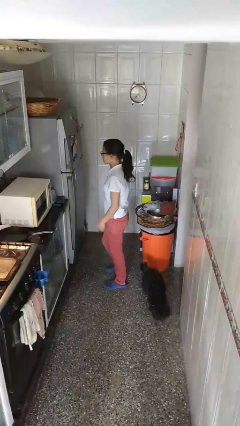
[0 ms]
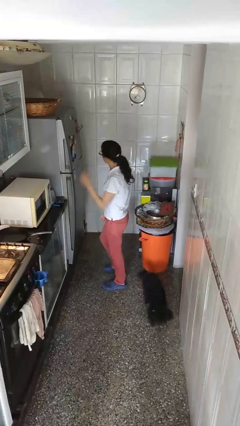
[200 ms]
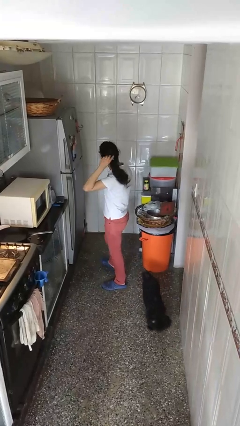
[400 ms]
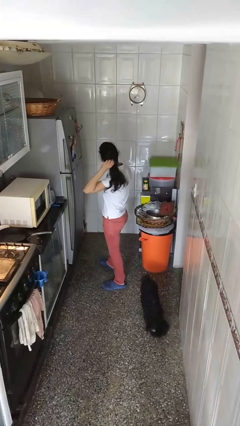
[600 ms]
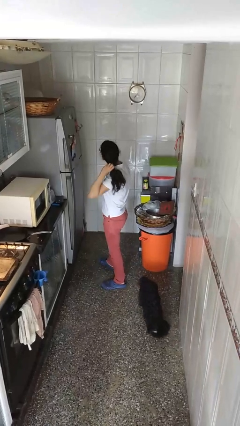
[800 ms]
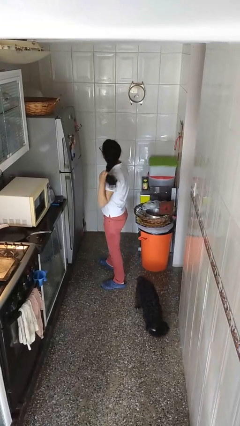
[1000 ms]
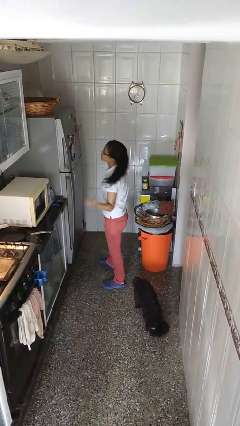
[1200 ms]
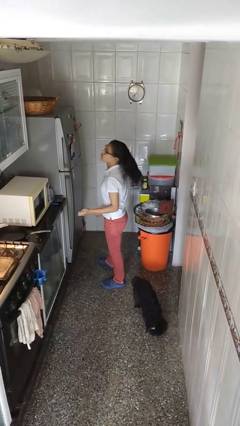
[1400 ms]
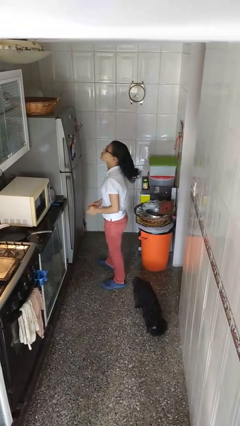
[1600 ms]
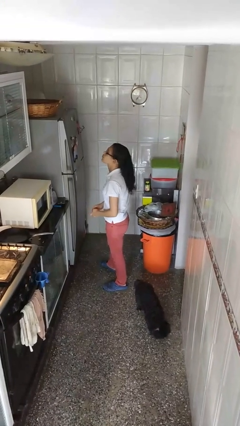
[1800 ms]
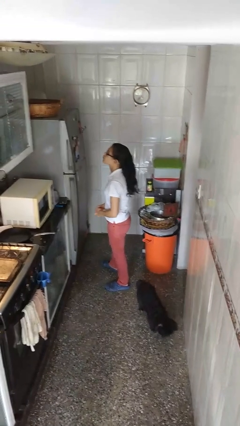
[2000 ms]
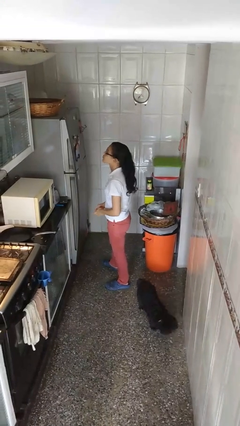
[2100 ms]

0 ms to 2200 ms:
person takes off hairtie

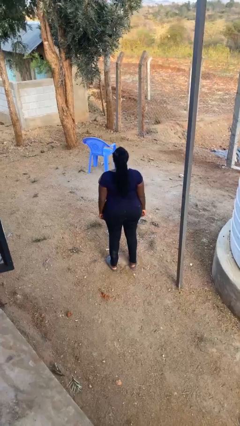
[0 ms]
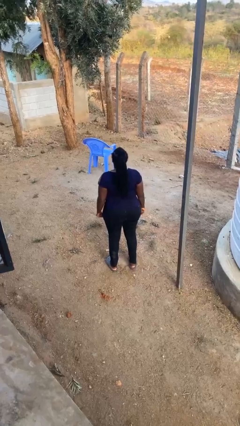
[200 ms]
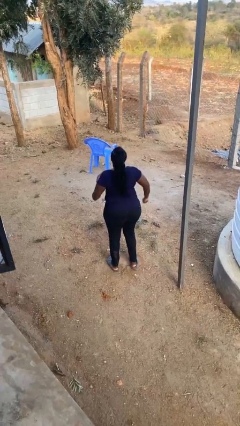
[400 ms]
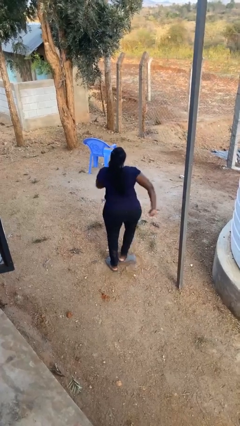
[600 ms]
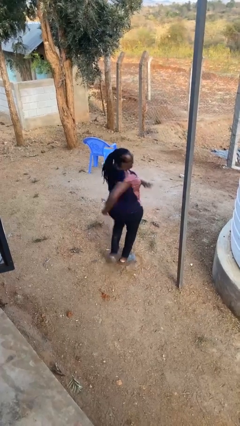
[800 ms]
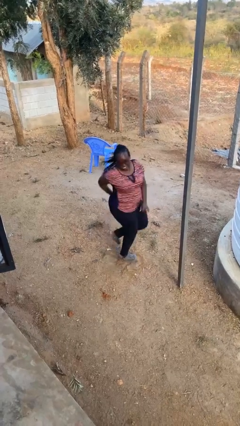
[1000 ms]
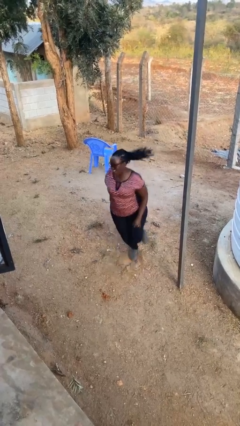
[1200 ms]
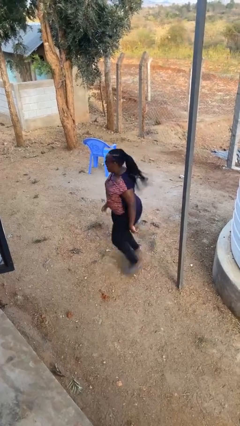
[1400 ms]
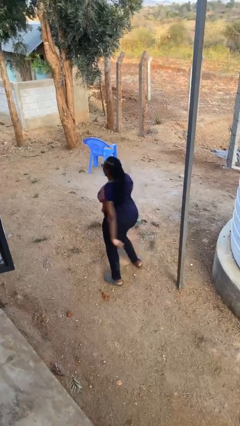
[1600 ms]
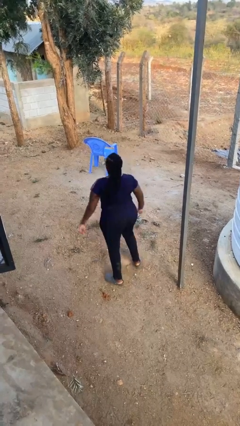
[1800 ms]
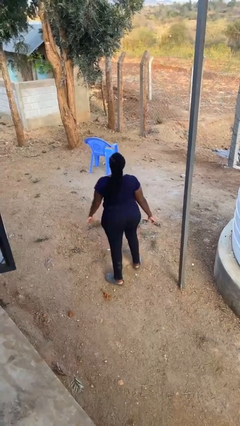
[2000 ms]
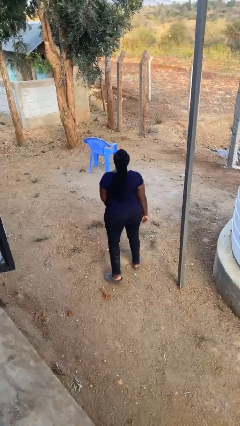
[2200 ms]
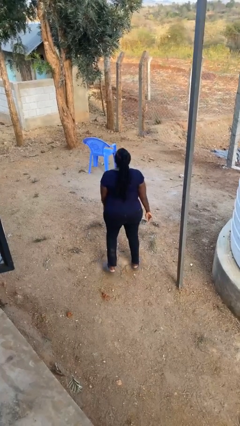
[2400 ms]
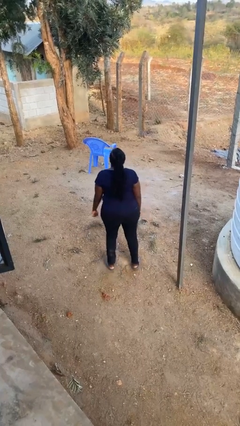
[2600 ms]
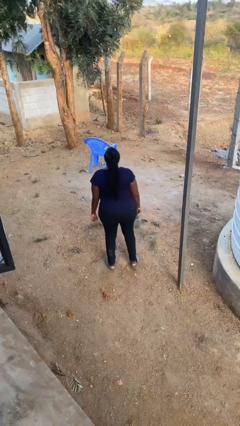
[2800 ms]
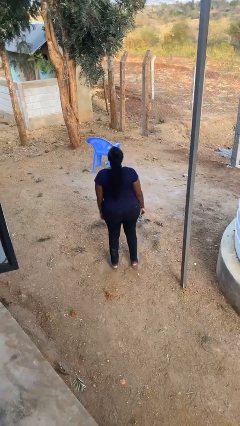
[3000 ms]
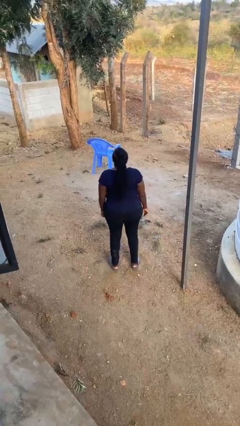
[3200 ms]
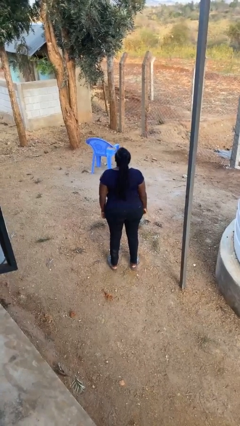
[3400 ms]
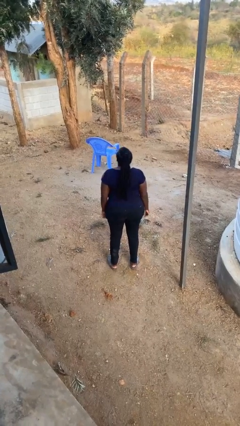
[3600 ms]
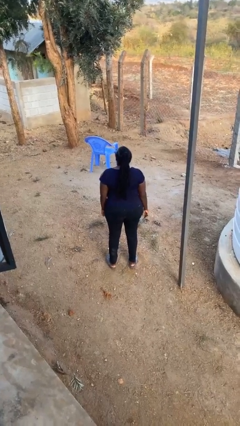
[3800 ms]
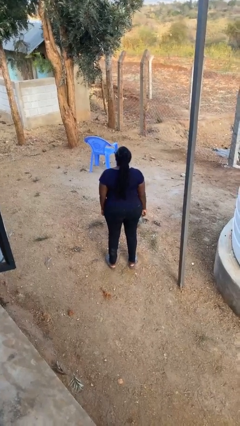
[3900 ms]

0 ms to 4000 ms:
person twirls

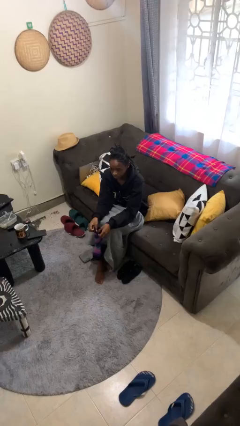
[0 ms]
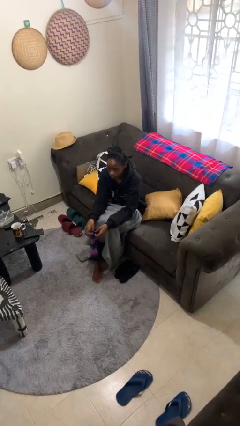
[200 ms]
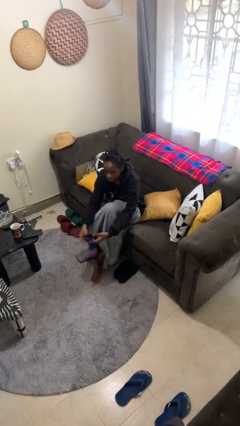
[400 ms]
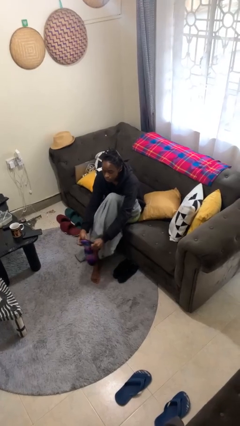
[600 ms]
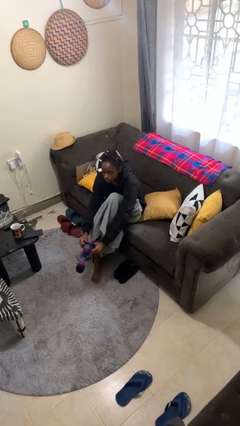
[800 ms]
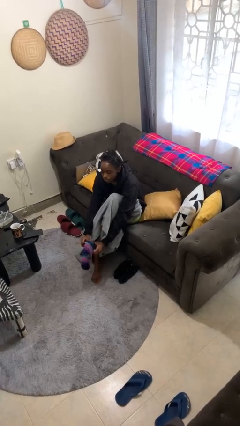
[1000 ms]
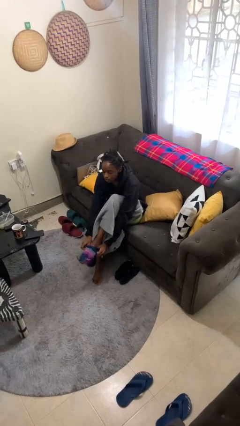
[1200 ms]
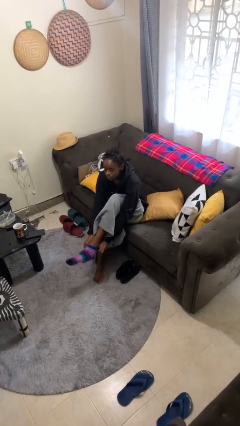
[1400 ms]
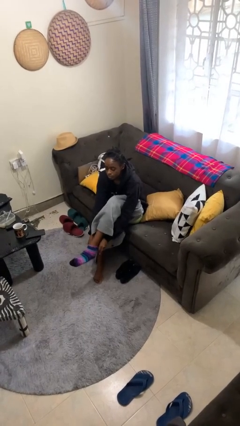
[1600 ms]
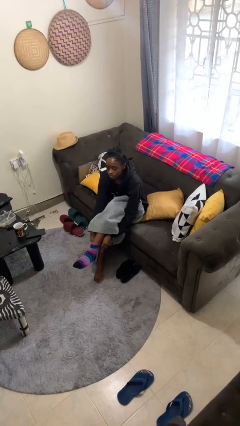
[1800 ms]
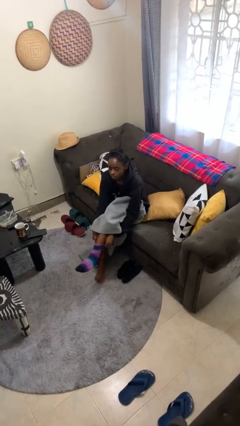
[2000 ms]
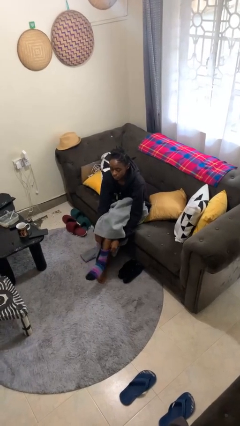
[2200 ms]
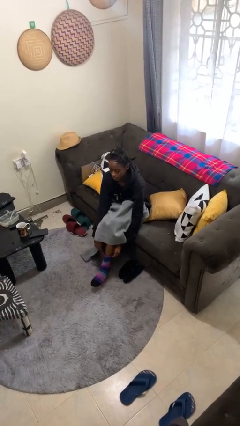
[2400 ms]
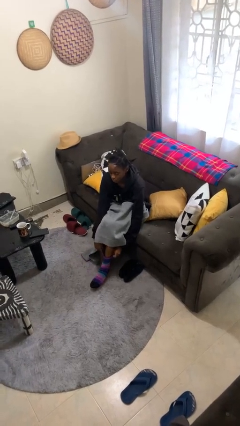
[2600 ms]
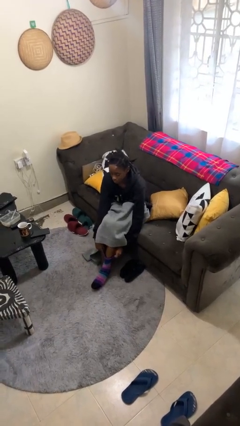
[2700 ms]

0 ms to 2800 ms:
person puts on socks

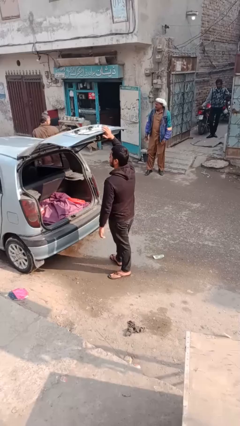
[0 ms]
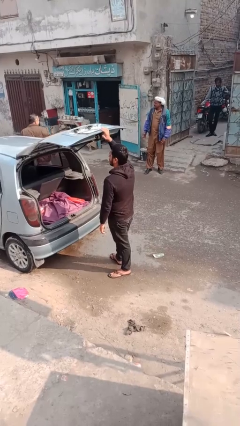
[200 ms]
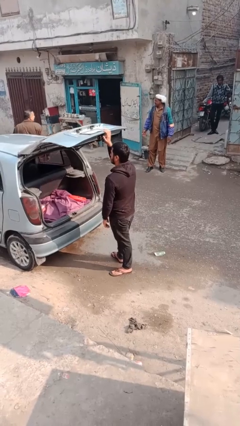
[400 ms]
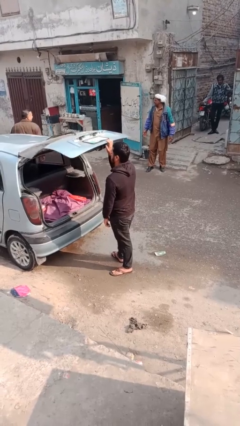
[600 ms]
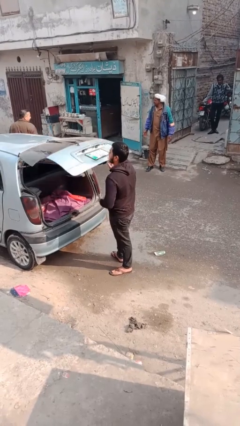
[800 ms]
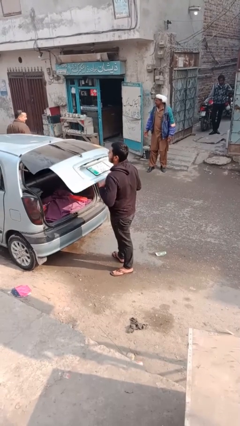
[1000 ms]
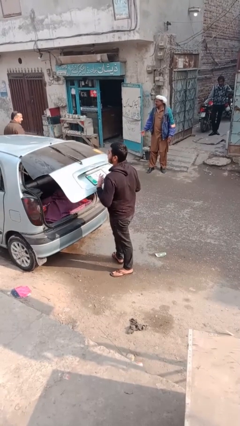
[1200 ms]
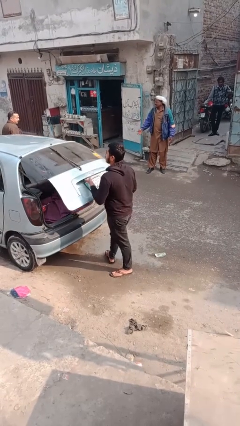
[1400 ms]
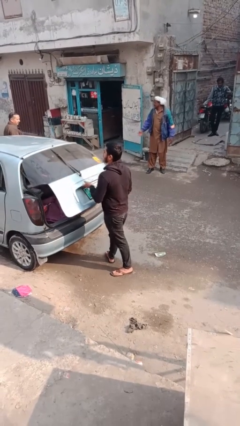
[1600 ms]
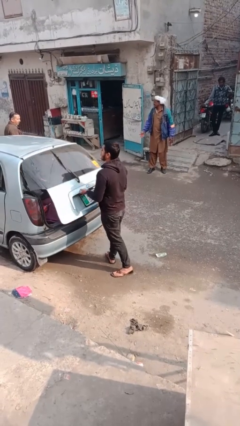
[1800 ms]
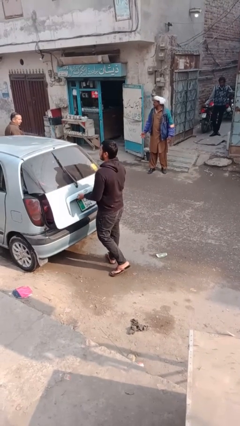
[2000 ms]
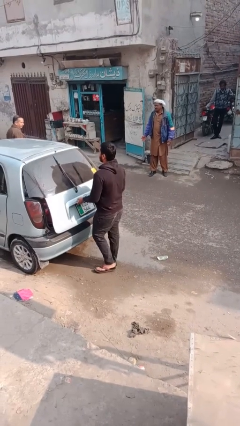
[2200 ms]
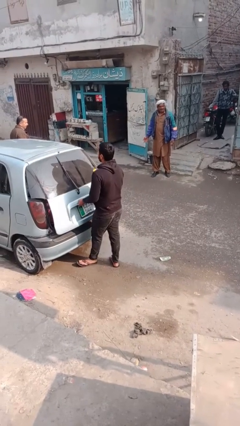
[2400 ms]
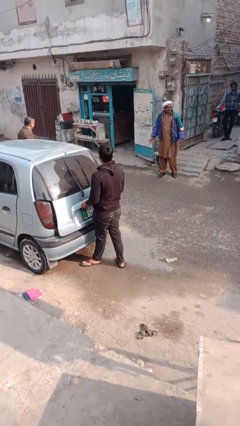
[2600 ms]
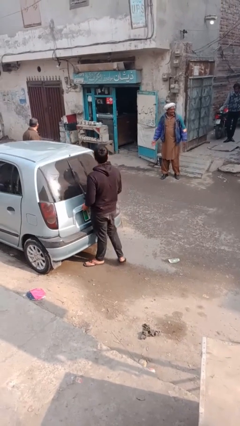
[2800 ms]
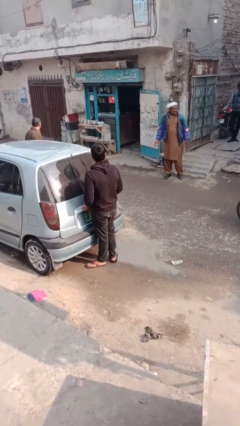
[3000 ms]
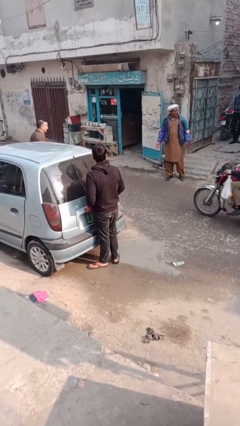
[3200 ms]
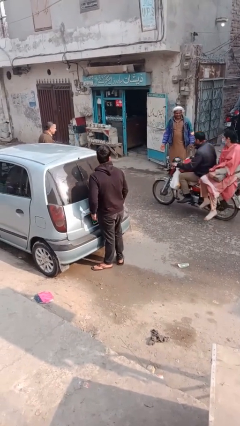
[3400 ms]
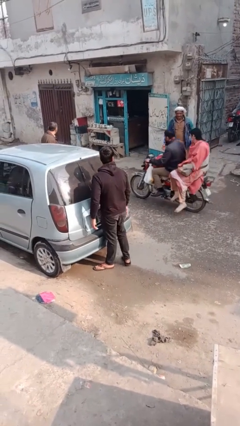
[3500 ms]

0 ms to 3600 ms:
person closes car trunk

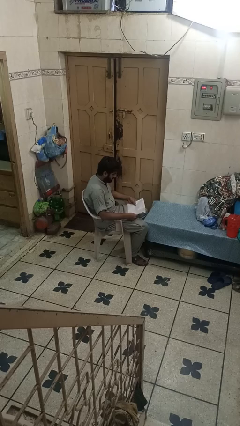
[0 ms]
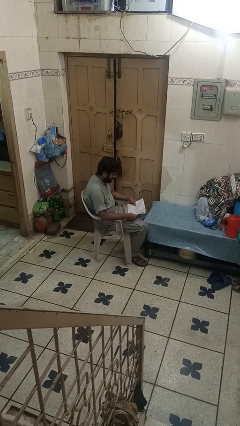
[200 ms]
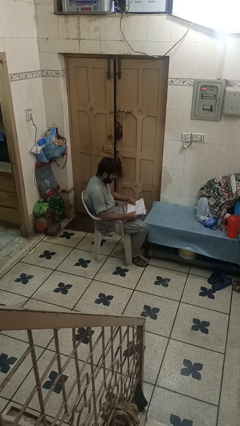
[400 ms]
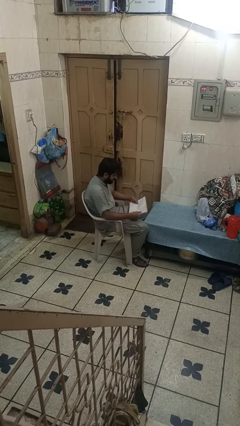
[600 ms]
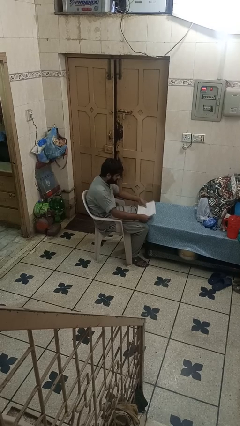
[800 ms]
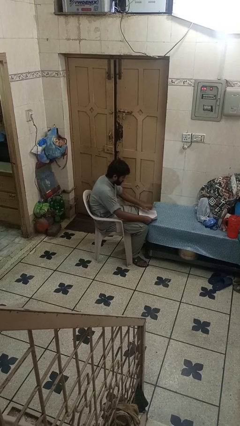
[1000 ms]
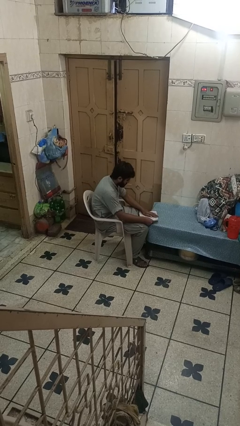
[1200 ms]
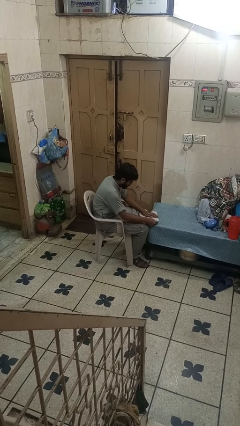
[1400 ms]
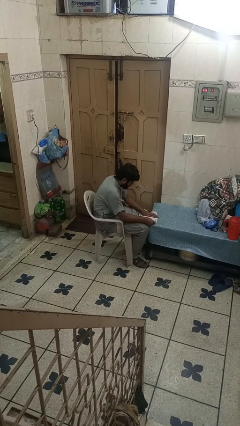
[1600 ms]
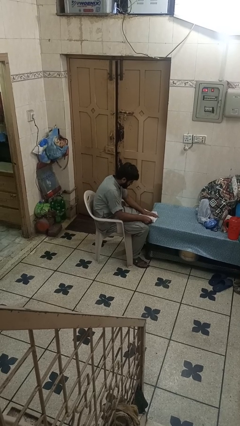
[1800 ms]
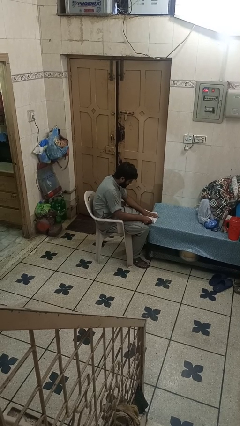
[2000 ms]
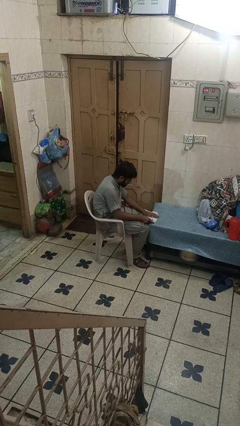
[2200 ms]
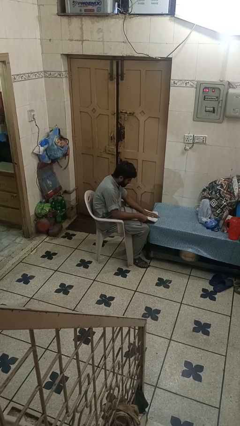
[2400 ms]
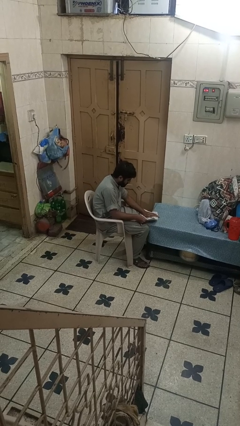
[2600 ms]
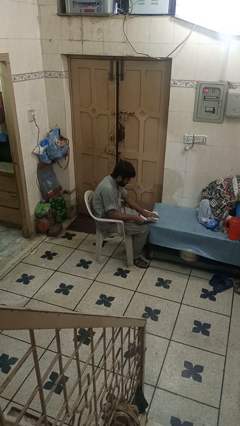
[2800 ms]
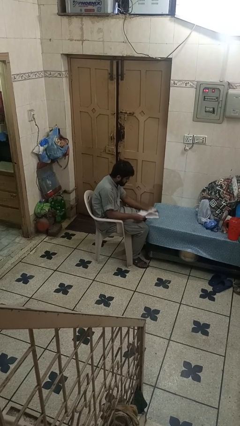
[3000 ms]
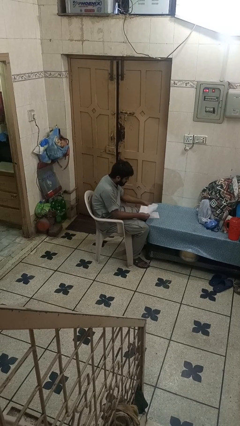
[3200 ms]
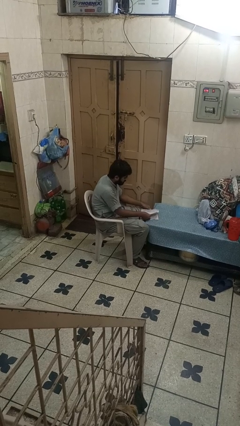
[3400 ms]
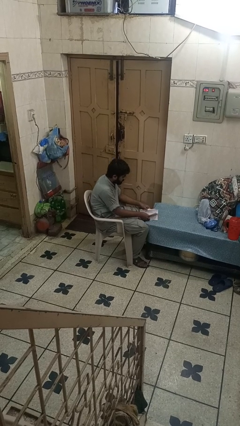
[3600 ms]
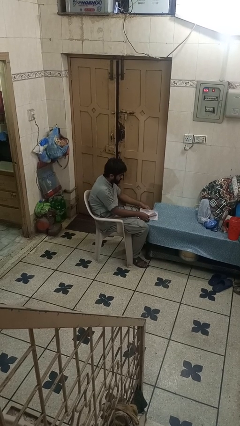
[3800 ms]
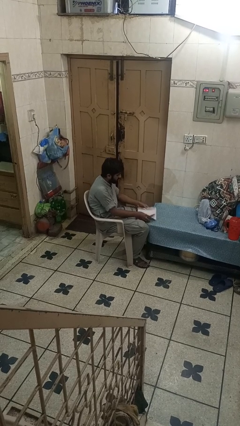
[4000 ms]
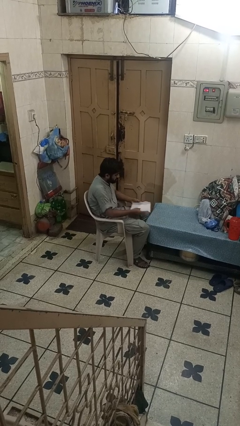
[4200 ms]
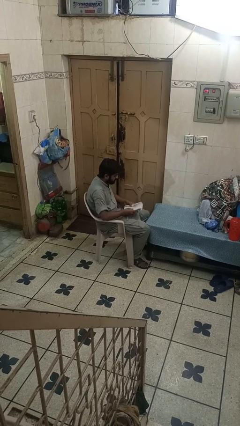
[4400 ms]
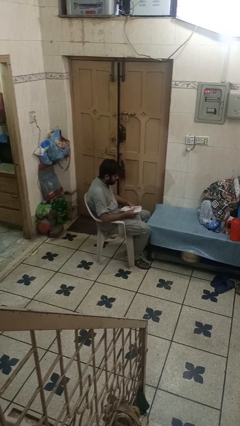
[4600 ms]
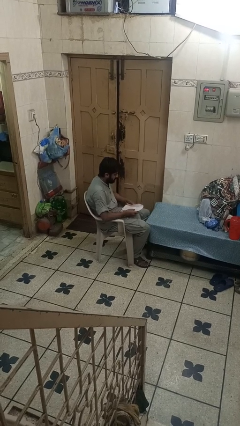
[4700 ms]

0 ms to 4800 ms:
person tears paper
